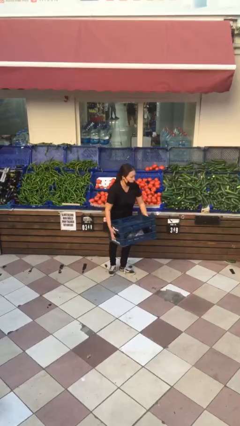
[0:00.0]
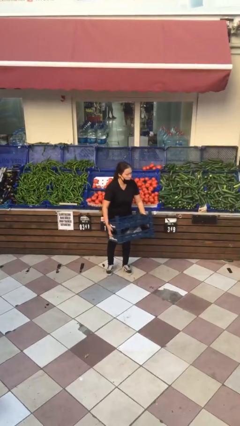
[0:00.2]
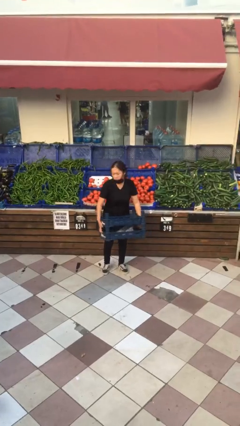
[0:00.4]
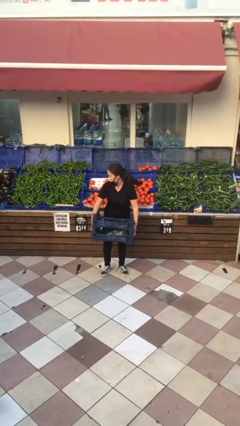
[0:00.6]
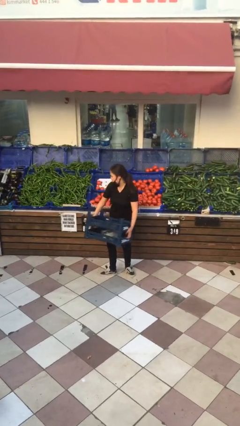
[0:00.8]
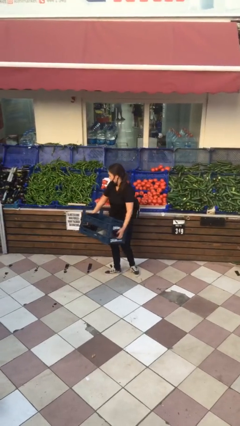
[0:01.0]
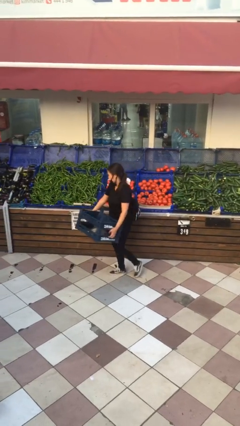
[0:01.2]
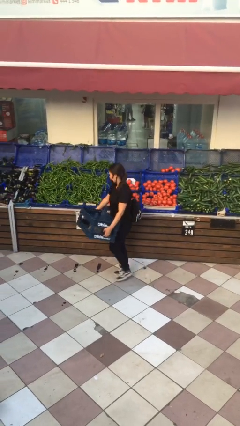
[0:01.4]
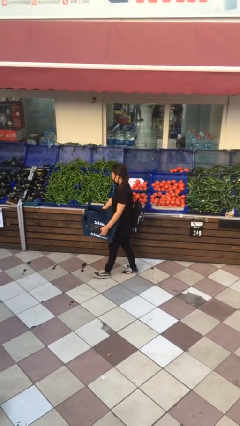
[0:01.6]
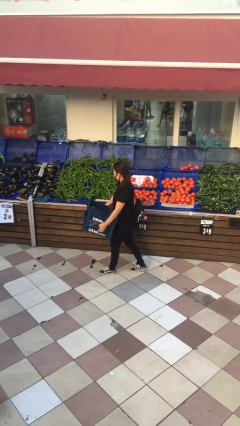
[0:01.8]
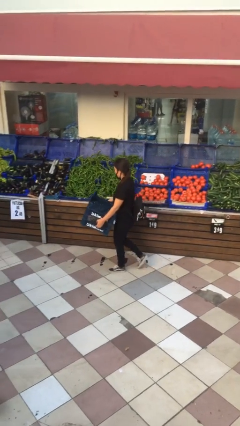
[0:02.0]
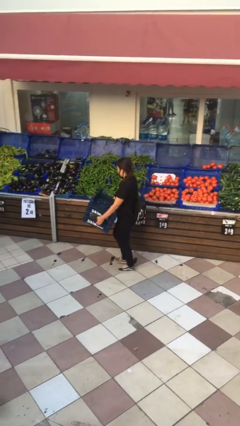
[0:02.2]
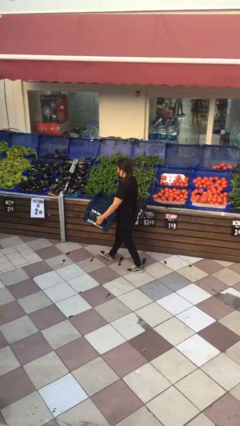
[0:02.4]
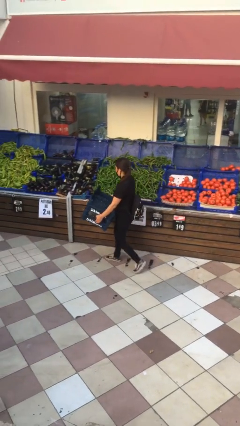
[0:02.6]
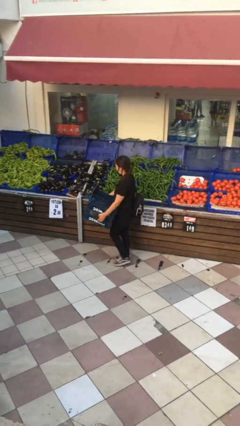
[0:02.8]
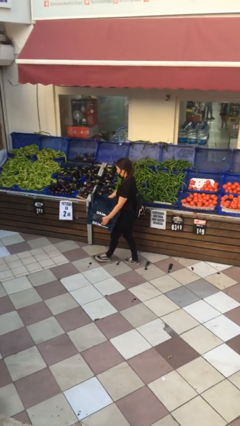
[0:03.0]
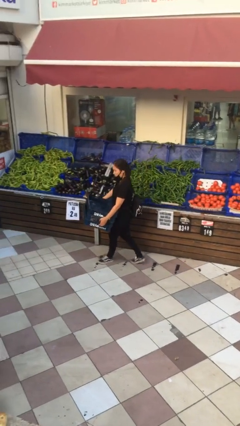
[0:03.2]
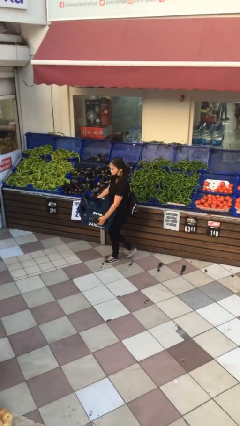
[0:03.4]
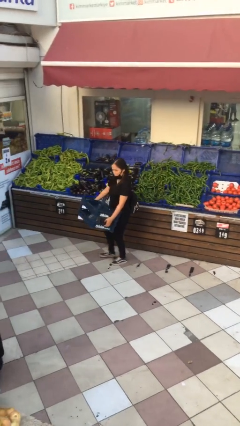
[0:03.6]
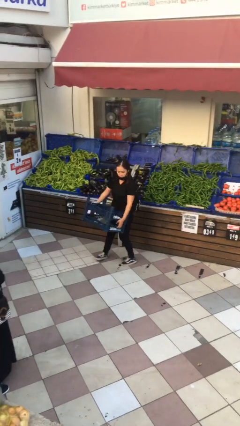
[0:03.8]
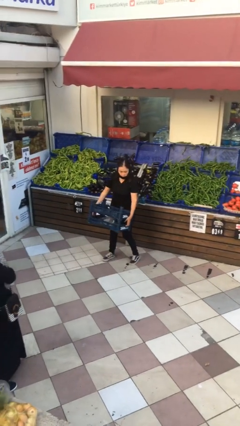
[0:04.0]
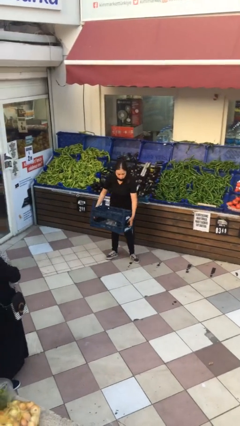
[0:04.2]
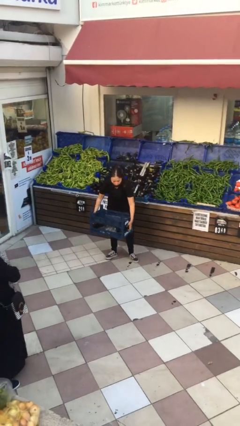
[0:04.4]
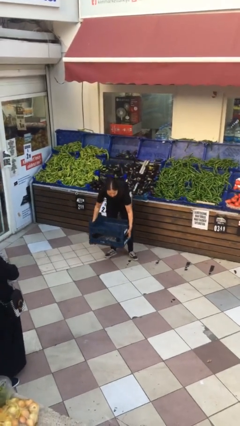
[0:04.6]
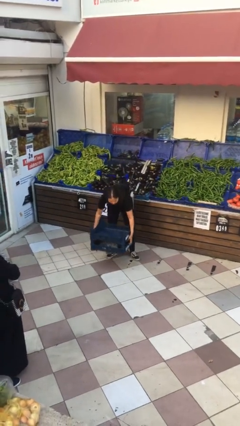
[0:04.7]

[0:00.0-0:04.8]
person carries heavy object

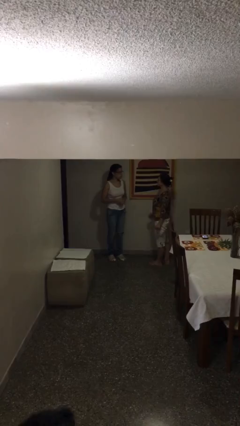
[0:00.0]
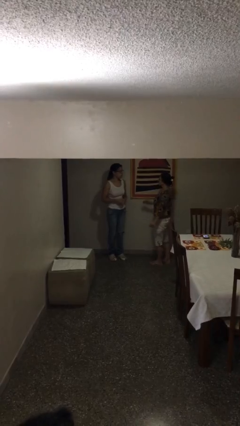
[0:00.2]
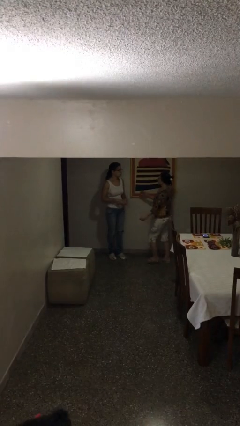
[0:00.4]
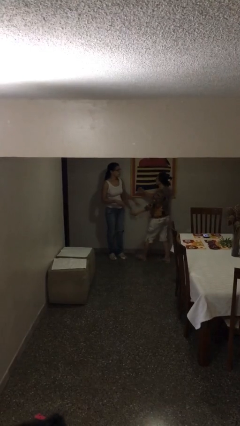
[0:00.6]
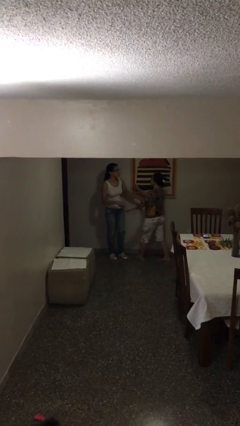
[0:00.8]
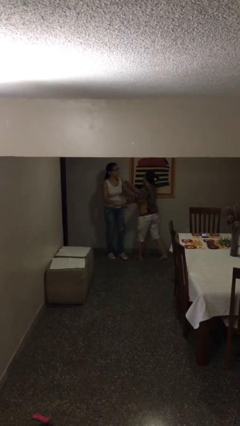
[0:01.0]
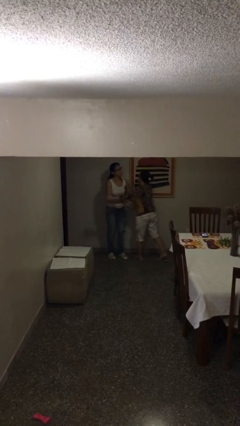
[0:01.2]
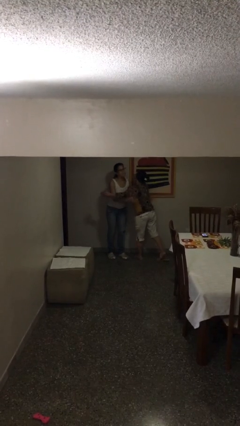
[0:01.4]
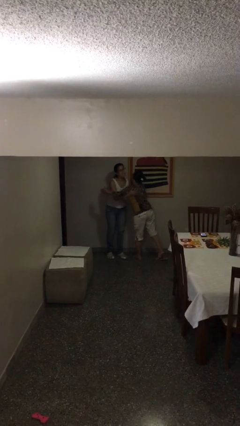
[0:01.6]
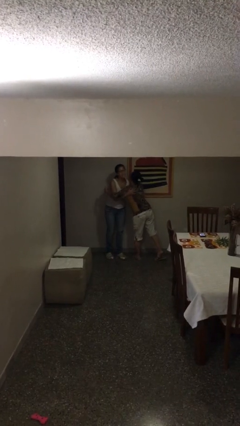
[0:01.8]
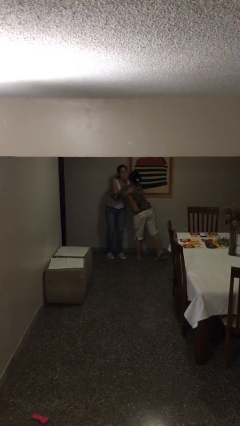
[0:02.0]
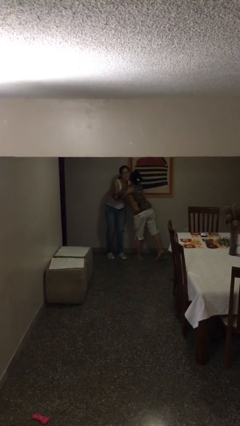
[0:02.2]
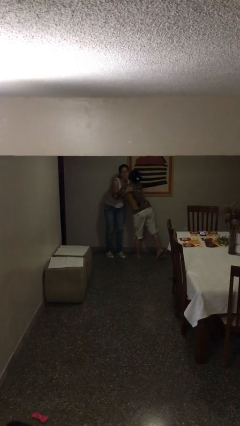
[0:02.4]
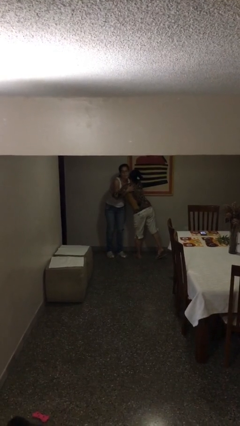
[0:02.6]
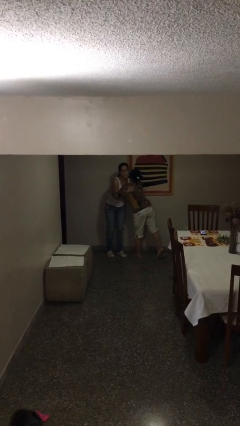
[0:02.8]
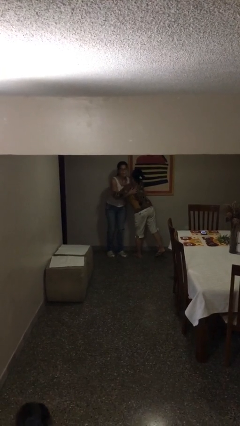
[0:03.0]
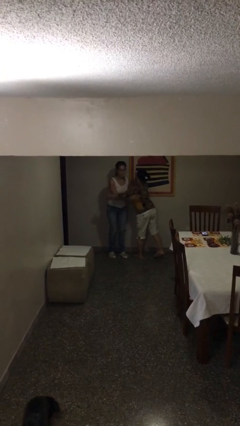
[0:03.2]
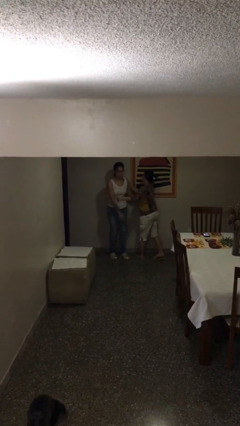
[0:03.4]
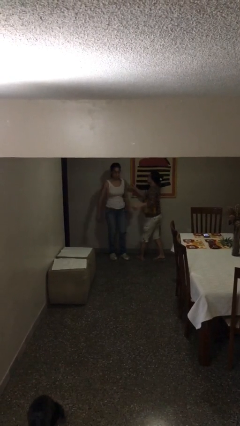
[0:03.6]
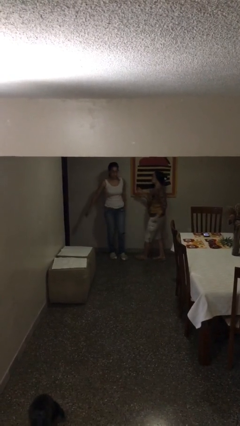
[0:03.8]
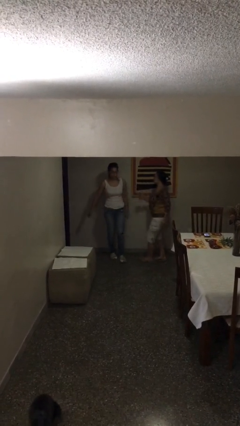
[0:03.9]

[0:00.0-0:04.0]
person embraces person

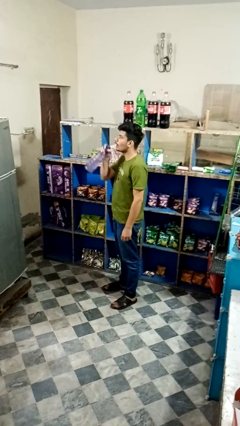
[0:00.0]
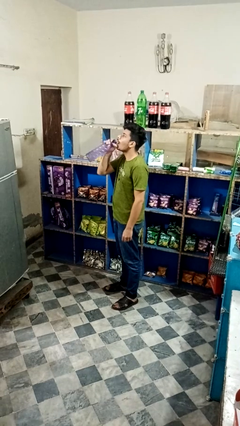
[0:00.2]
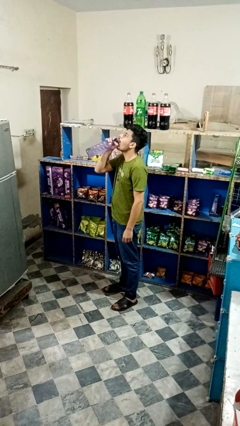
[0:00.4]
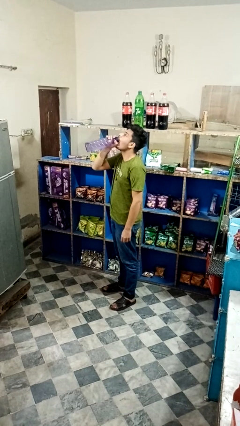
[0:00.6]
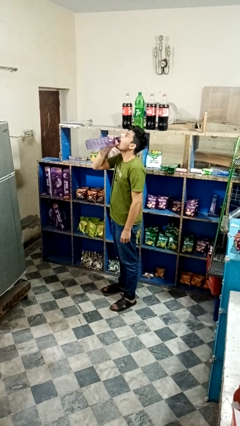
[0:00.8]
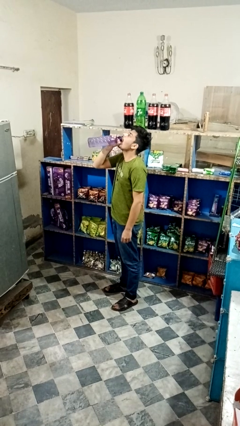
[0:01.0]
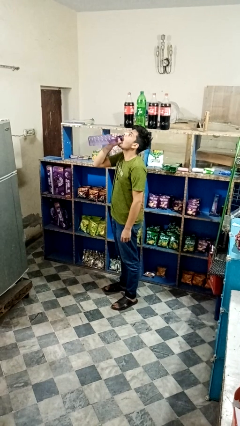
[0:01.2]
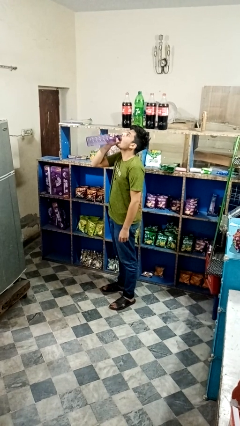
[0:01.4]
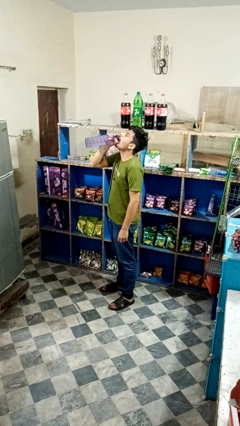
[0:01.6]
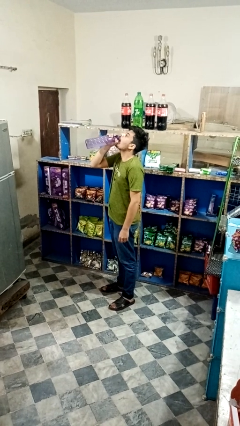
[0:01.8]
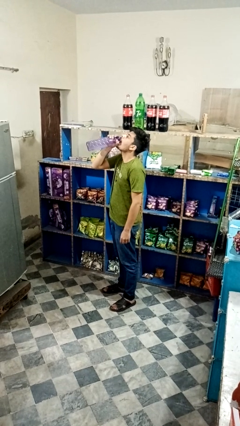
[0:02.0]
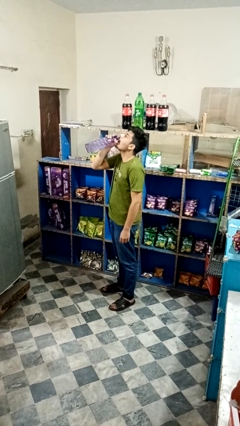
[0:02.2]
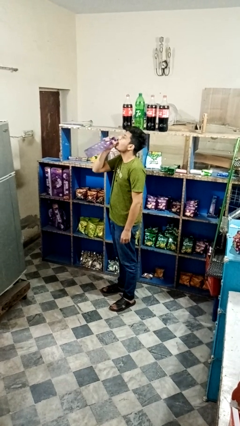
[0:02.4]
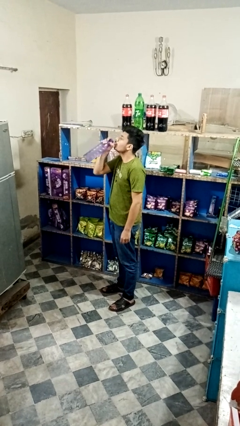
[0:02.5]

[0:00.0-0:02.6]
person drinks from bottle

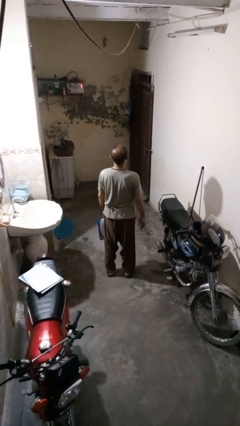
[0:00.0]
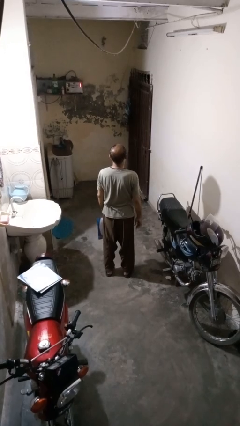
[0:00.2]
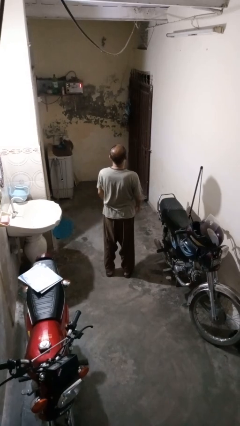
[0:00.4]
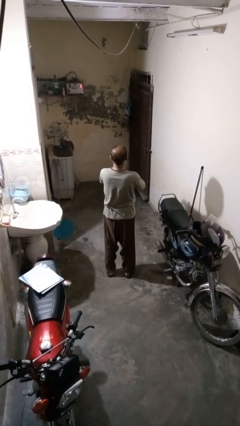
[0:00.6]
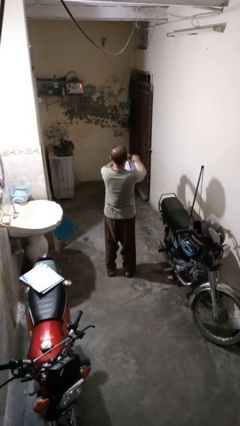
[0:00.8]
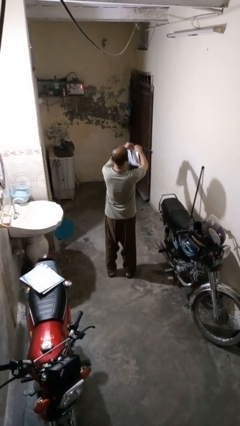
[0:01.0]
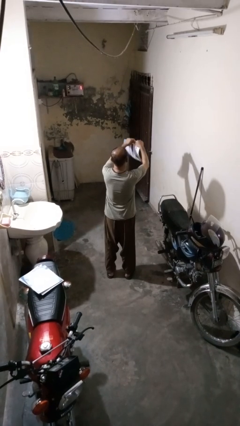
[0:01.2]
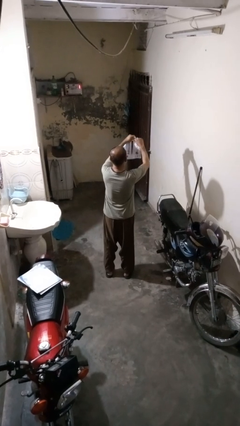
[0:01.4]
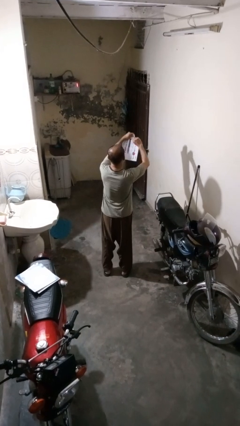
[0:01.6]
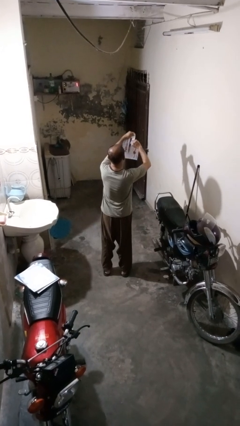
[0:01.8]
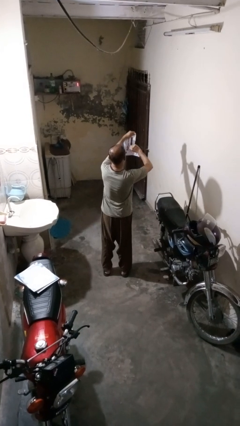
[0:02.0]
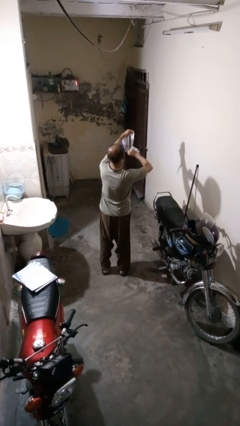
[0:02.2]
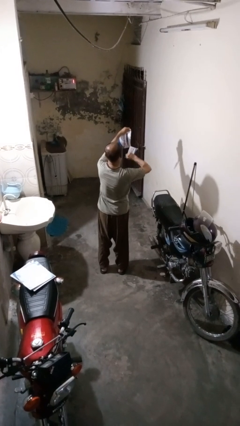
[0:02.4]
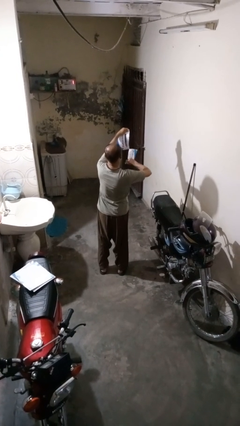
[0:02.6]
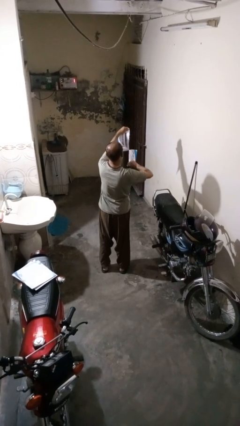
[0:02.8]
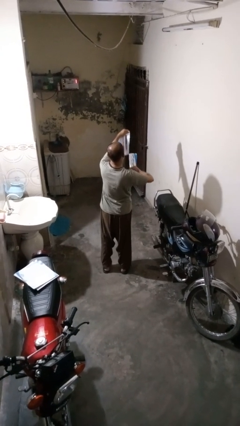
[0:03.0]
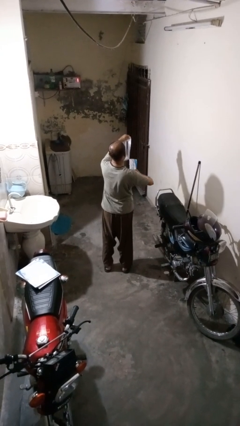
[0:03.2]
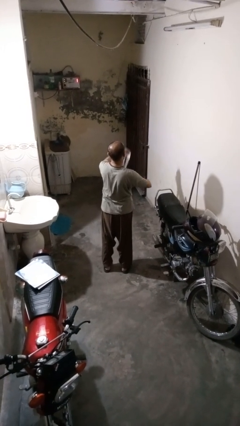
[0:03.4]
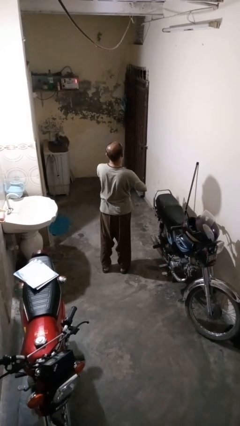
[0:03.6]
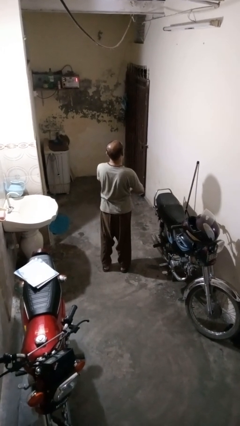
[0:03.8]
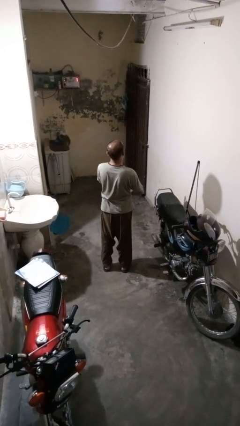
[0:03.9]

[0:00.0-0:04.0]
person tears paper

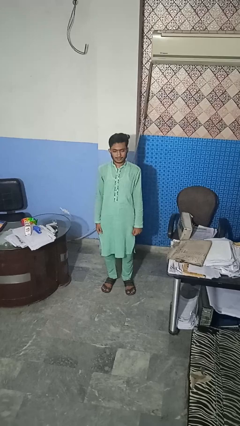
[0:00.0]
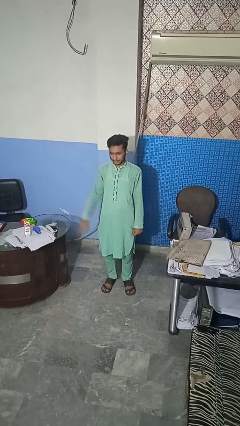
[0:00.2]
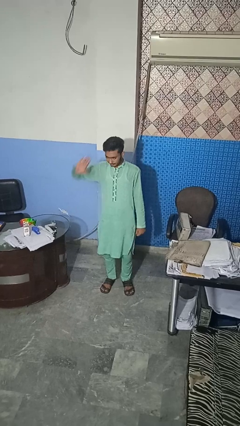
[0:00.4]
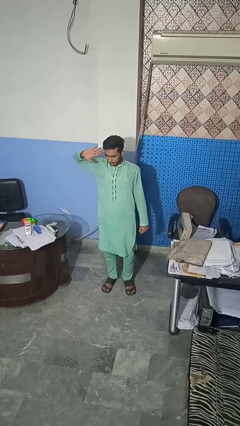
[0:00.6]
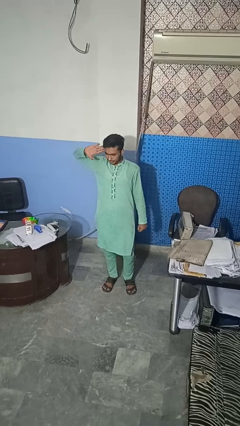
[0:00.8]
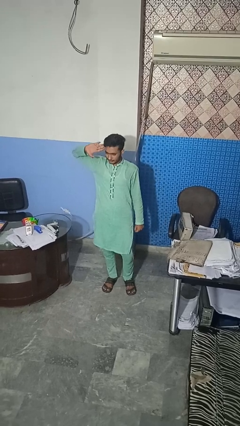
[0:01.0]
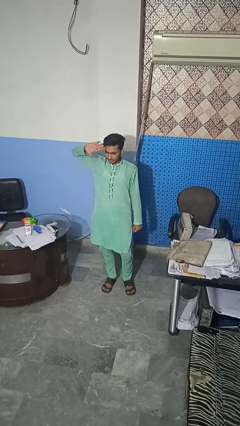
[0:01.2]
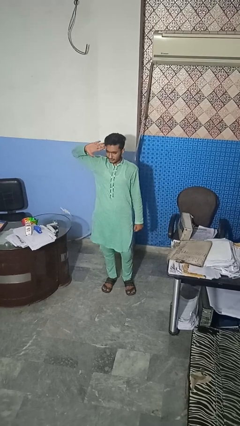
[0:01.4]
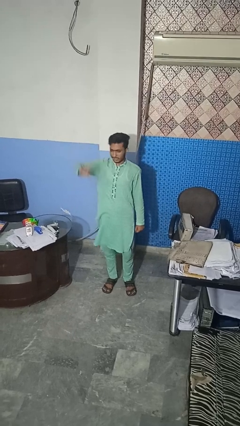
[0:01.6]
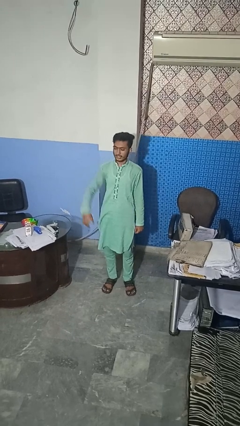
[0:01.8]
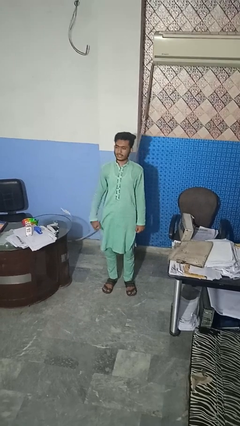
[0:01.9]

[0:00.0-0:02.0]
person salutes
